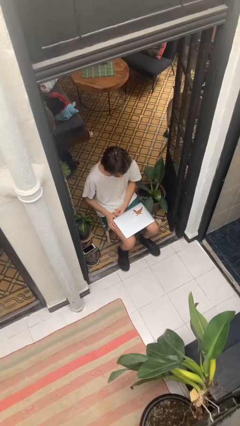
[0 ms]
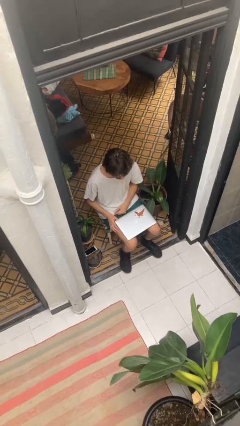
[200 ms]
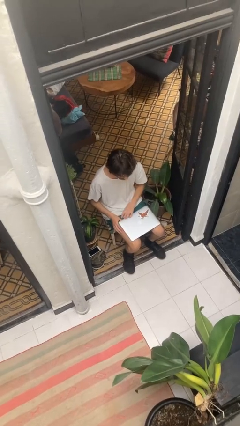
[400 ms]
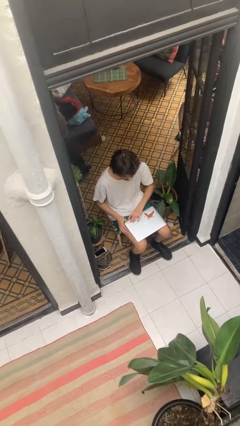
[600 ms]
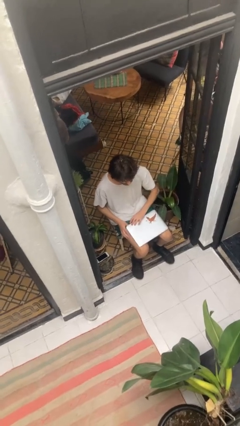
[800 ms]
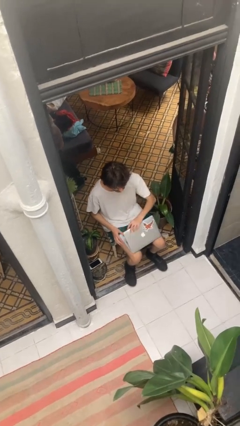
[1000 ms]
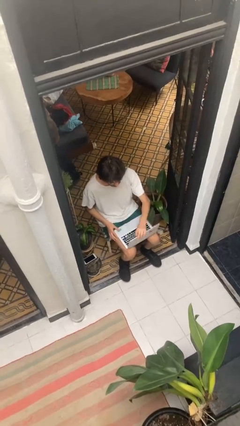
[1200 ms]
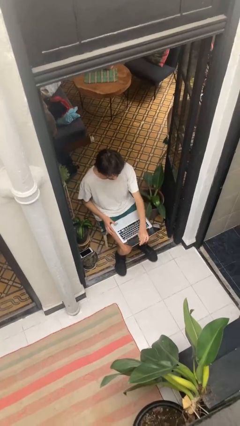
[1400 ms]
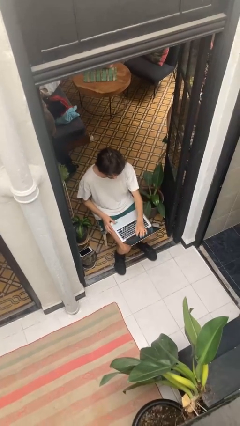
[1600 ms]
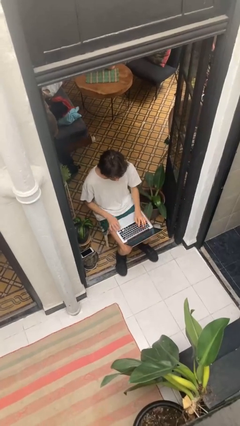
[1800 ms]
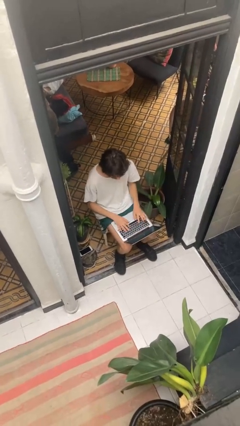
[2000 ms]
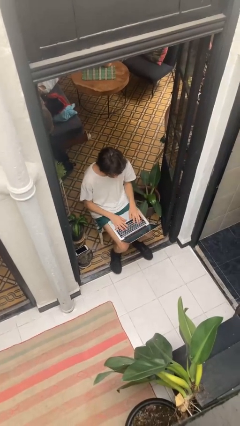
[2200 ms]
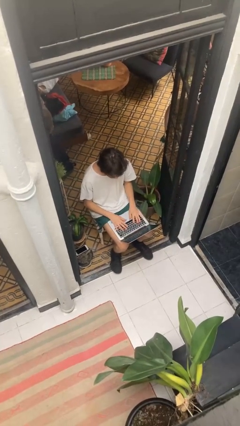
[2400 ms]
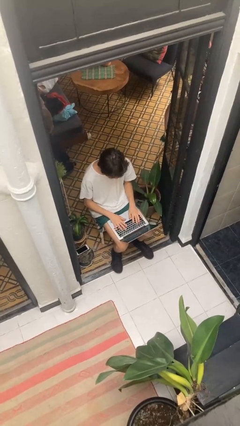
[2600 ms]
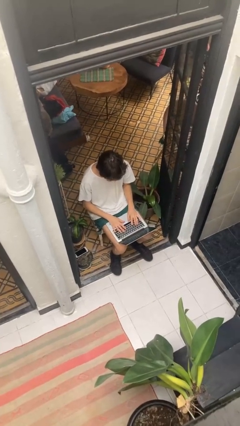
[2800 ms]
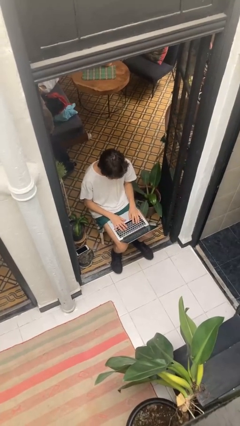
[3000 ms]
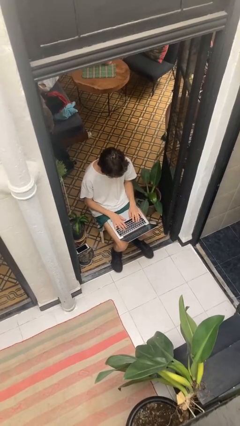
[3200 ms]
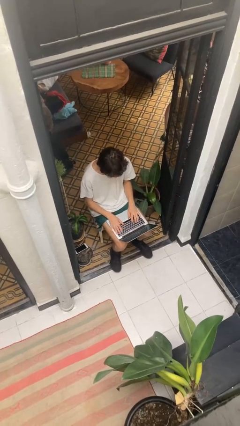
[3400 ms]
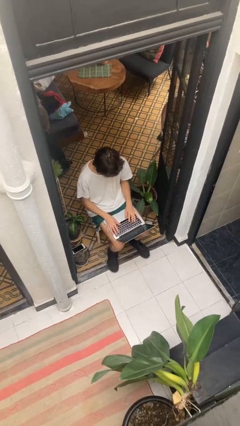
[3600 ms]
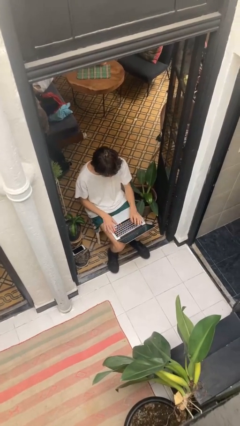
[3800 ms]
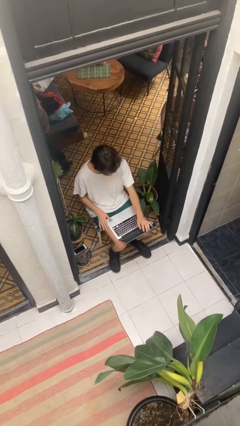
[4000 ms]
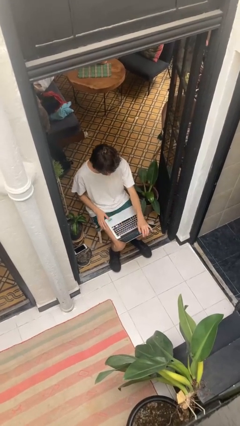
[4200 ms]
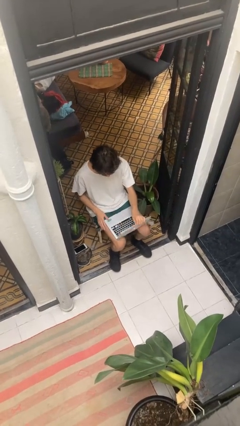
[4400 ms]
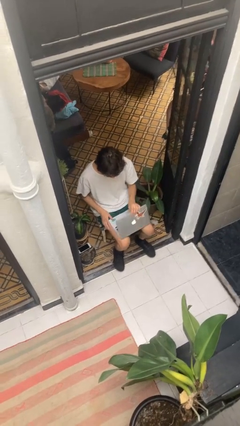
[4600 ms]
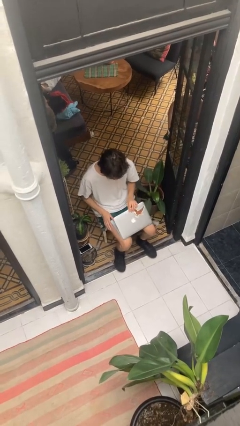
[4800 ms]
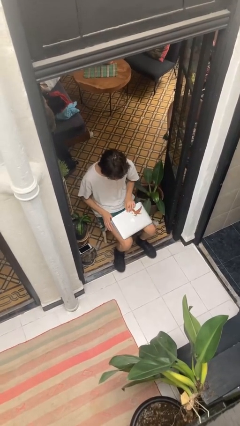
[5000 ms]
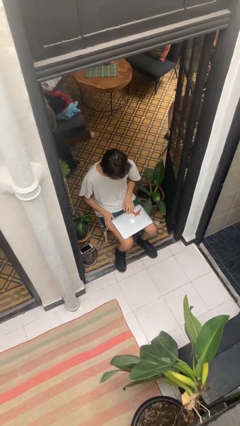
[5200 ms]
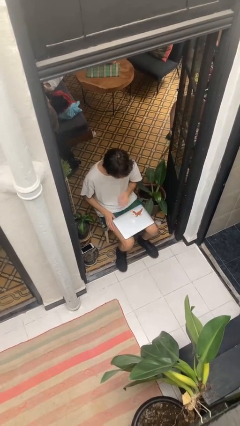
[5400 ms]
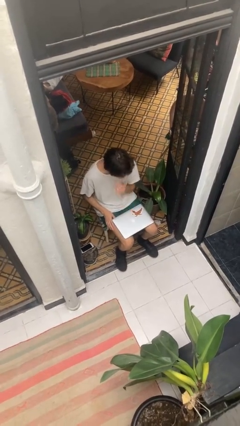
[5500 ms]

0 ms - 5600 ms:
person interacts with laptop

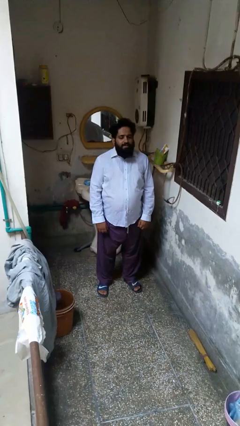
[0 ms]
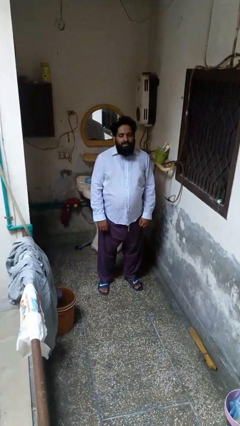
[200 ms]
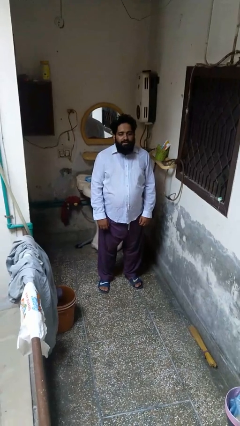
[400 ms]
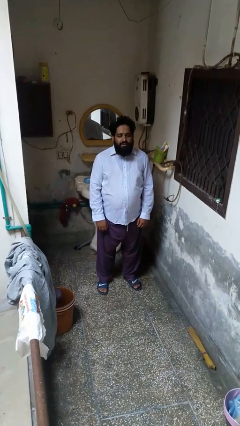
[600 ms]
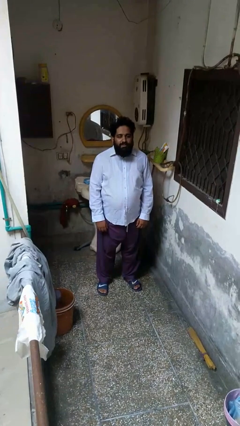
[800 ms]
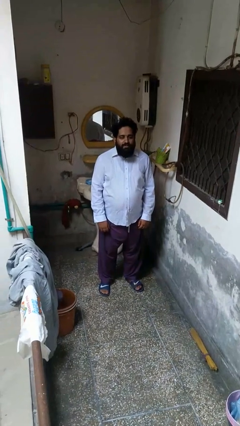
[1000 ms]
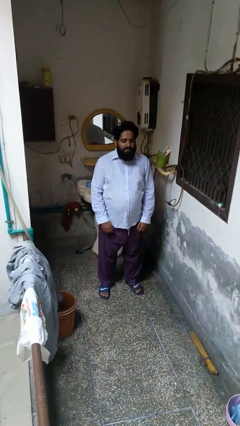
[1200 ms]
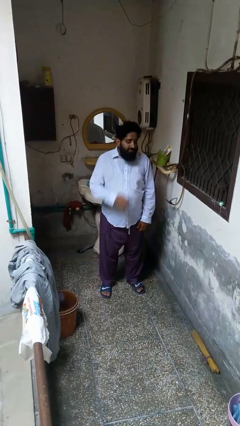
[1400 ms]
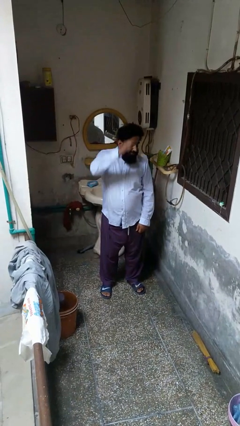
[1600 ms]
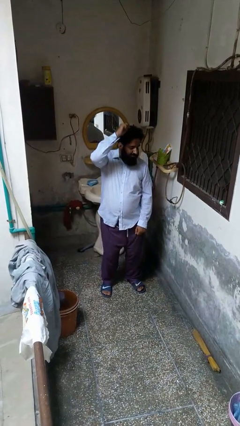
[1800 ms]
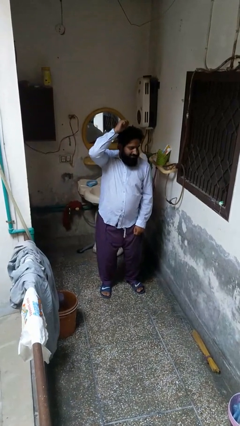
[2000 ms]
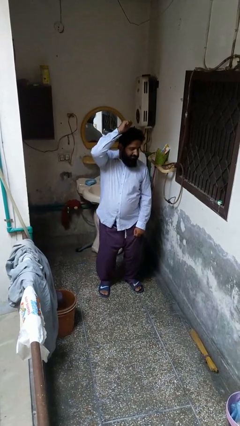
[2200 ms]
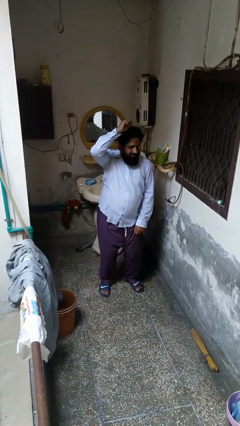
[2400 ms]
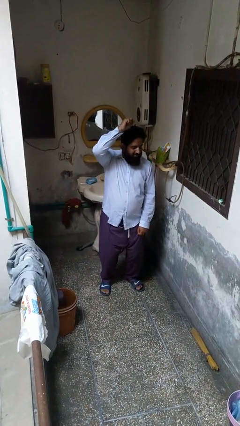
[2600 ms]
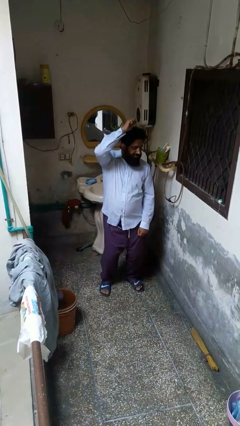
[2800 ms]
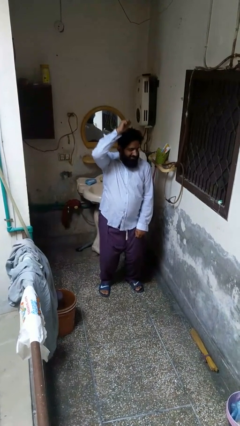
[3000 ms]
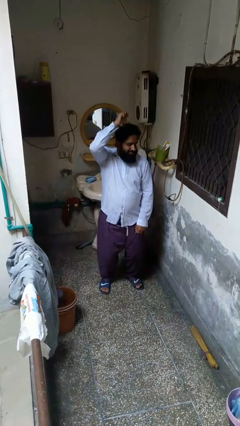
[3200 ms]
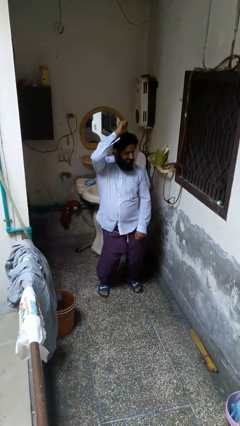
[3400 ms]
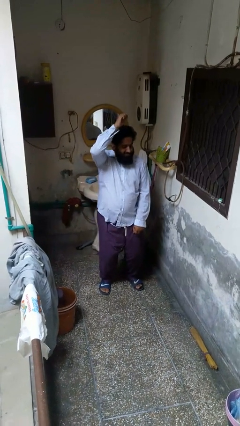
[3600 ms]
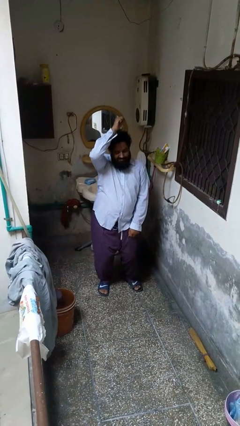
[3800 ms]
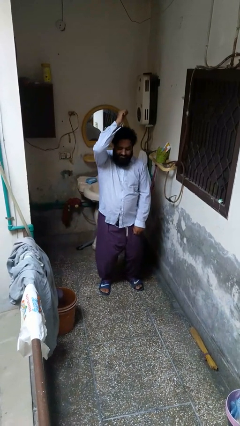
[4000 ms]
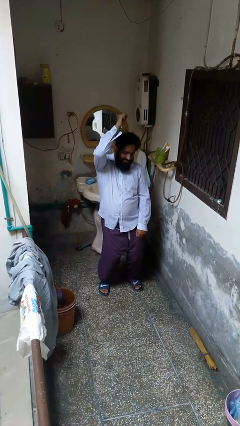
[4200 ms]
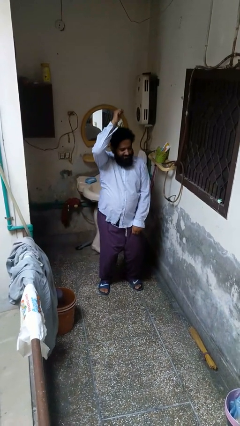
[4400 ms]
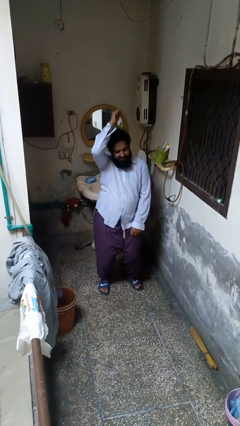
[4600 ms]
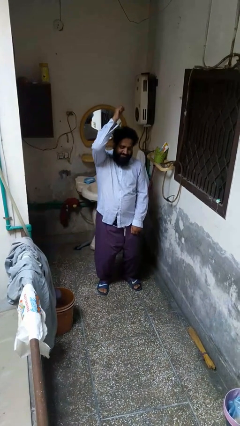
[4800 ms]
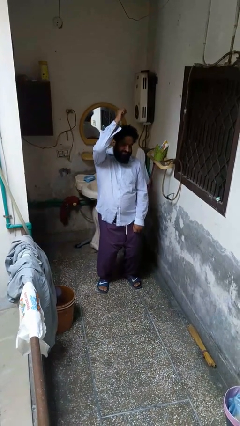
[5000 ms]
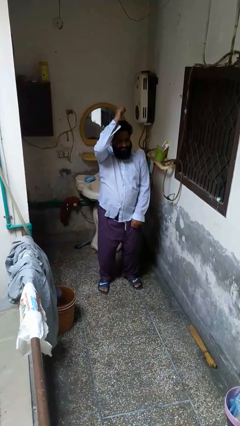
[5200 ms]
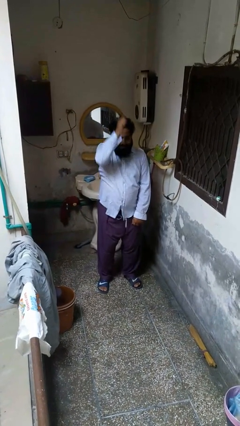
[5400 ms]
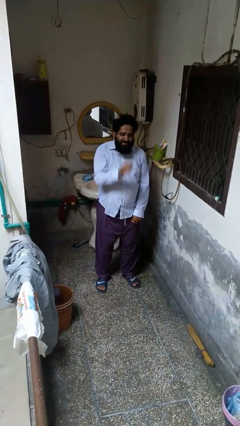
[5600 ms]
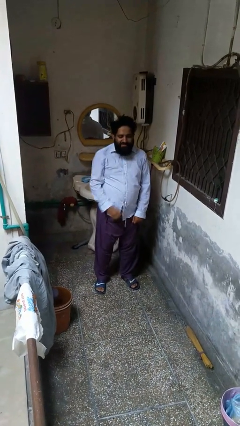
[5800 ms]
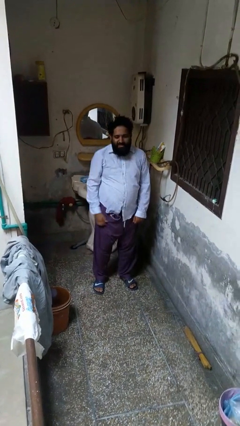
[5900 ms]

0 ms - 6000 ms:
person dances in place

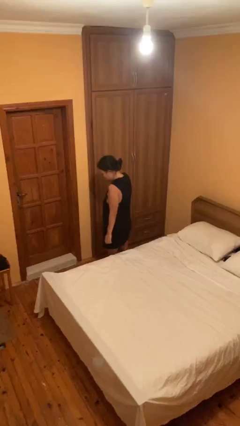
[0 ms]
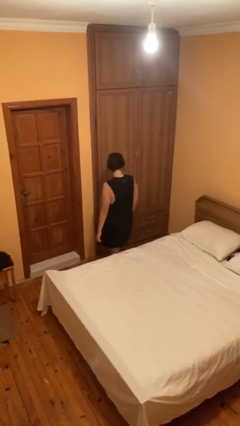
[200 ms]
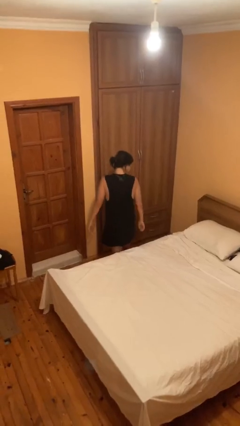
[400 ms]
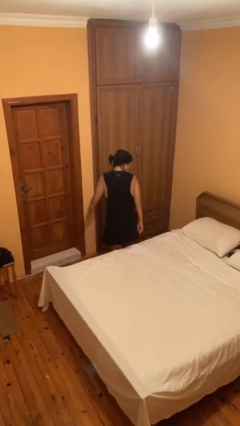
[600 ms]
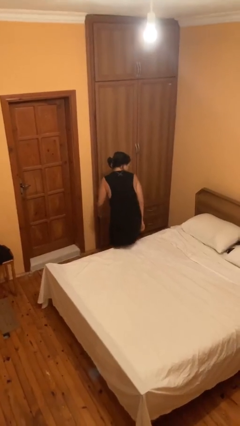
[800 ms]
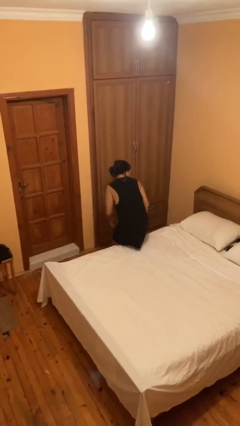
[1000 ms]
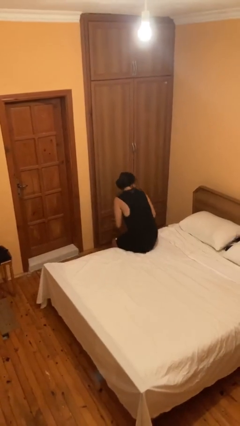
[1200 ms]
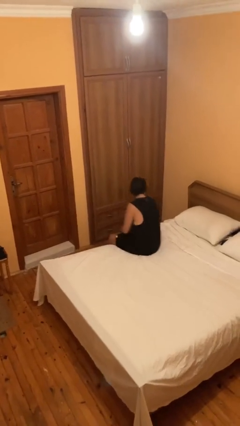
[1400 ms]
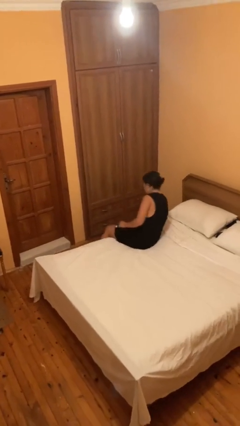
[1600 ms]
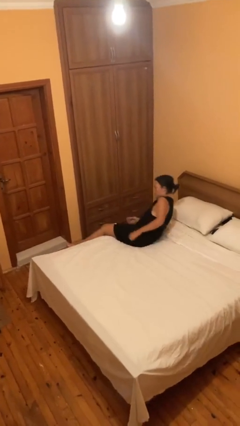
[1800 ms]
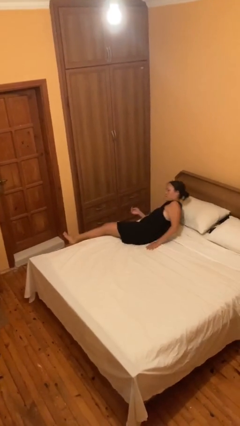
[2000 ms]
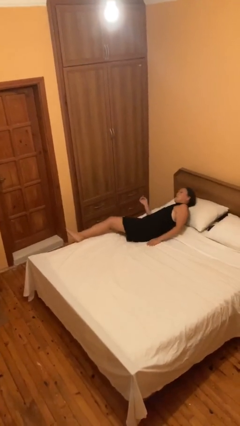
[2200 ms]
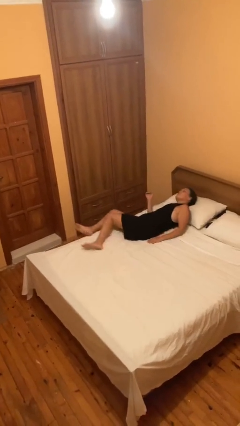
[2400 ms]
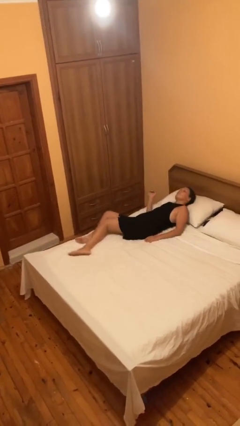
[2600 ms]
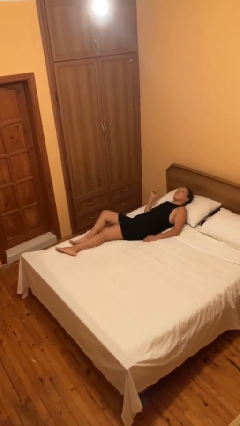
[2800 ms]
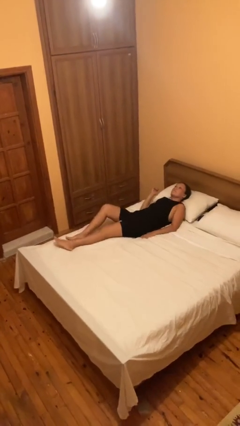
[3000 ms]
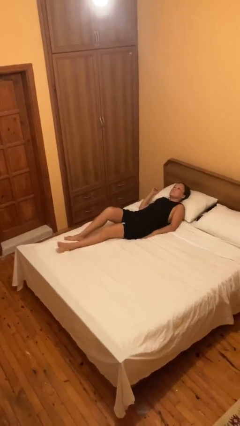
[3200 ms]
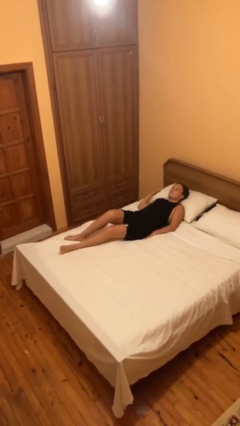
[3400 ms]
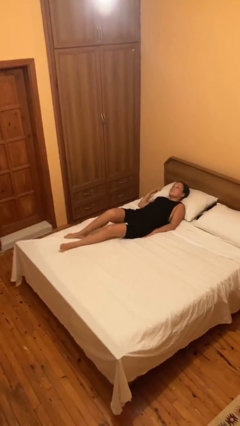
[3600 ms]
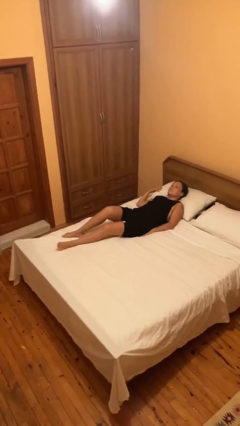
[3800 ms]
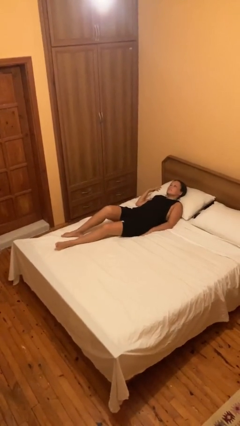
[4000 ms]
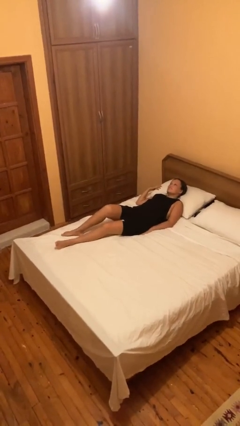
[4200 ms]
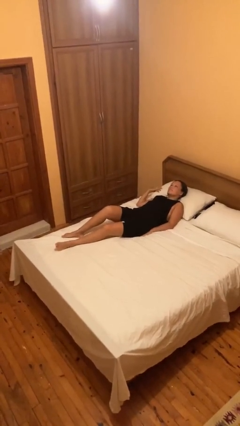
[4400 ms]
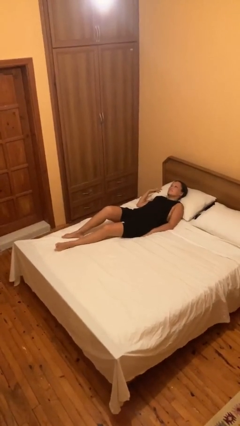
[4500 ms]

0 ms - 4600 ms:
person lies down on bed

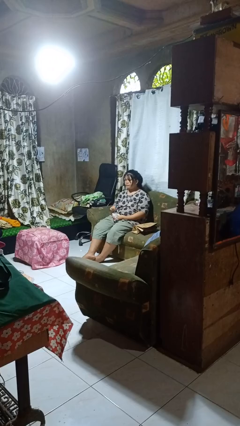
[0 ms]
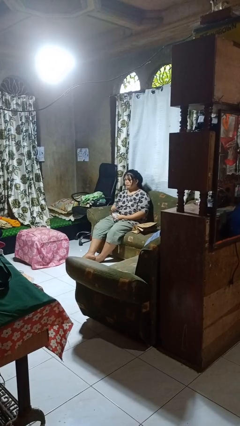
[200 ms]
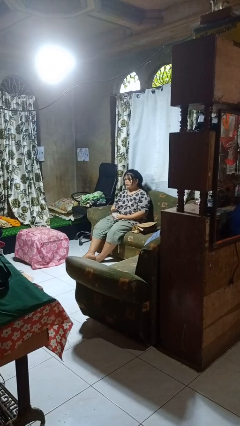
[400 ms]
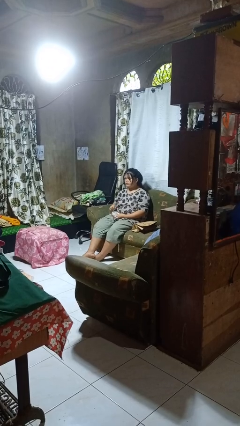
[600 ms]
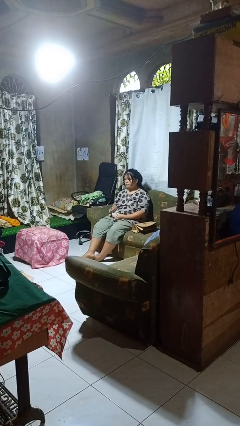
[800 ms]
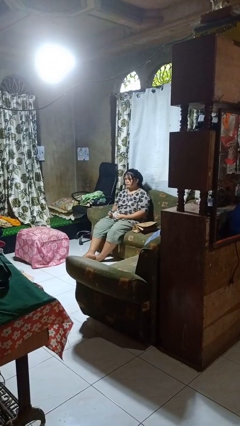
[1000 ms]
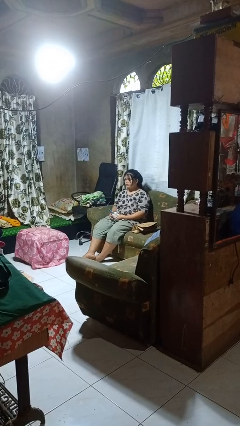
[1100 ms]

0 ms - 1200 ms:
person stirs mug

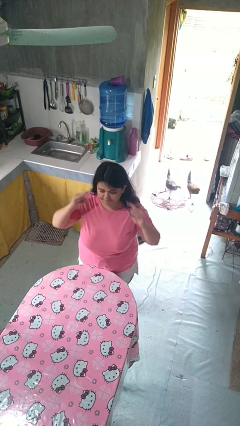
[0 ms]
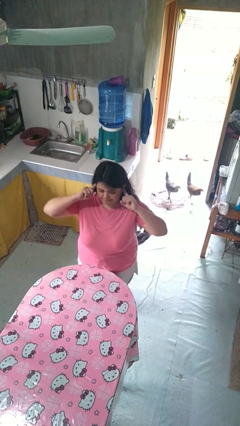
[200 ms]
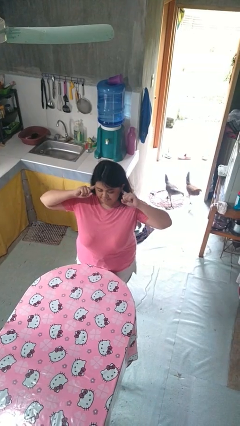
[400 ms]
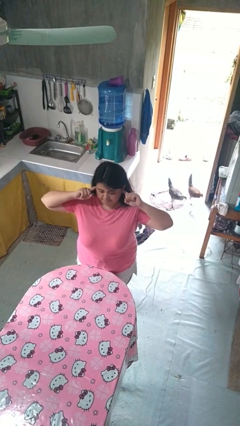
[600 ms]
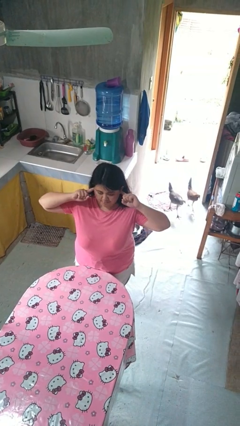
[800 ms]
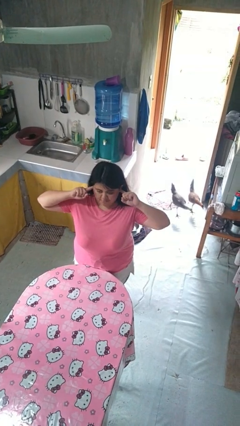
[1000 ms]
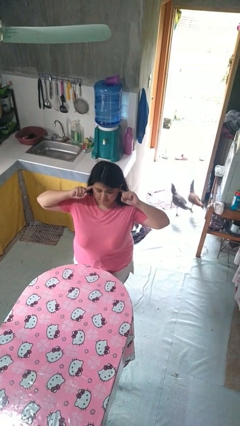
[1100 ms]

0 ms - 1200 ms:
person puts fingers in ear
